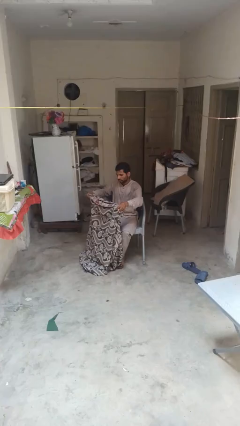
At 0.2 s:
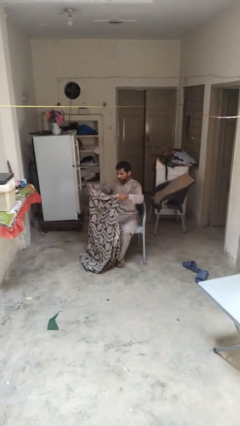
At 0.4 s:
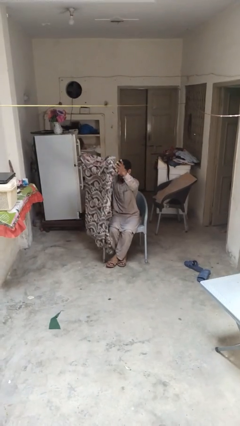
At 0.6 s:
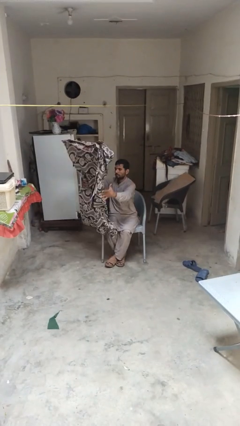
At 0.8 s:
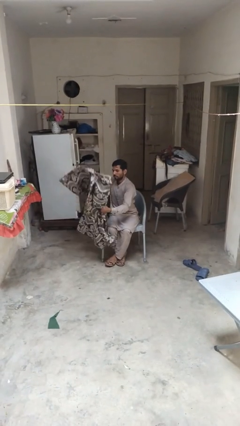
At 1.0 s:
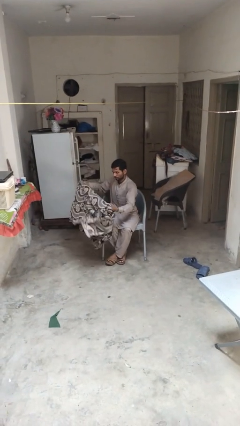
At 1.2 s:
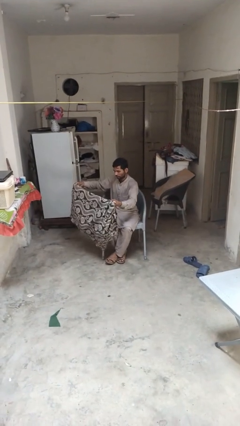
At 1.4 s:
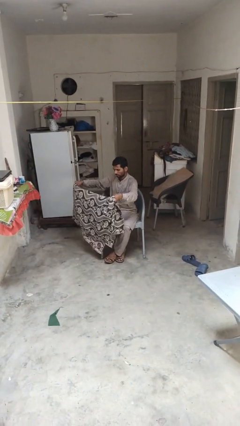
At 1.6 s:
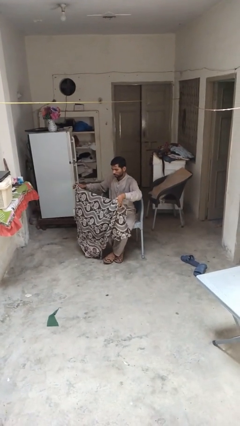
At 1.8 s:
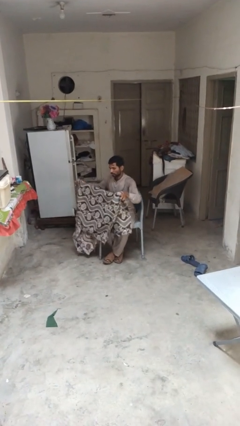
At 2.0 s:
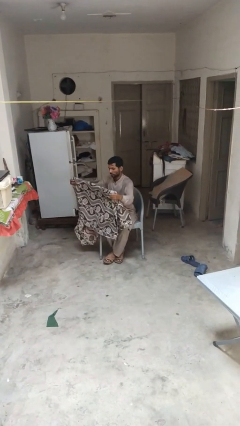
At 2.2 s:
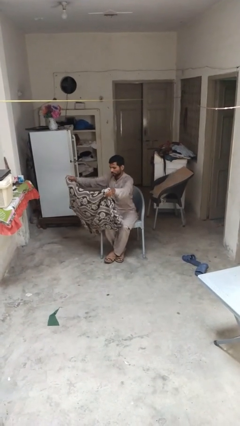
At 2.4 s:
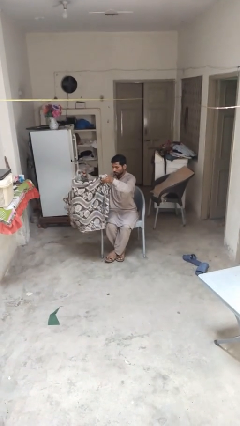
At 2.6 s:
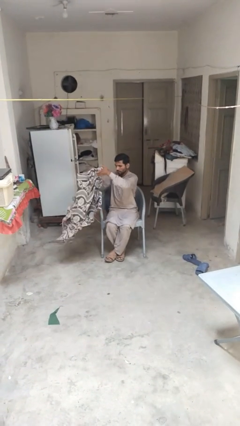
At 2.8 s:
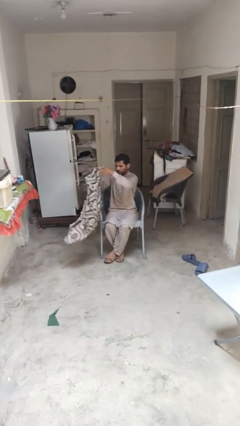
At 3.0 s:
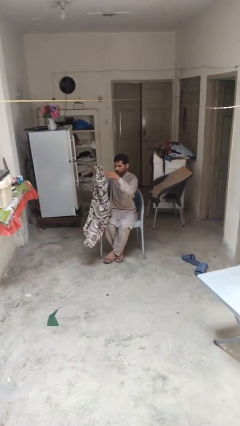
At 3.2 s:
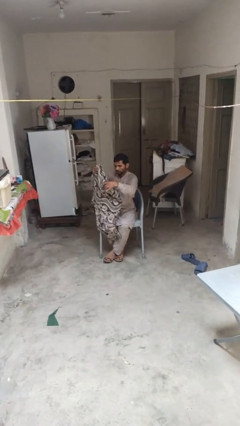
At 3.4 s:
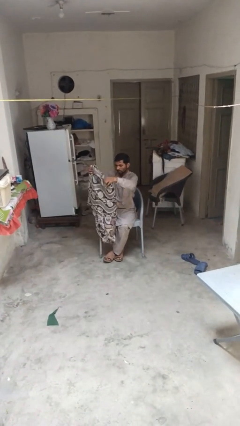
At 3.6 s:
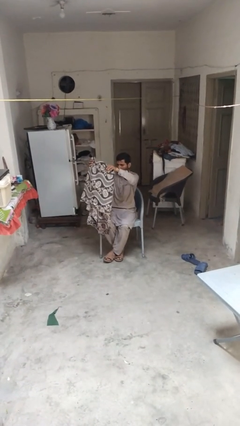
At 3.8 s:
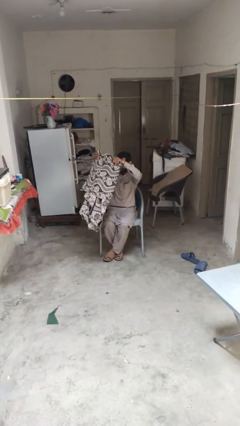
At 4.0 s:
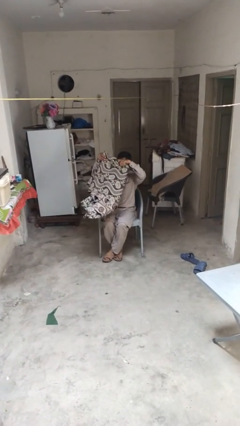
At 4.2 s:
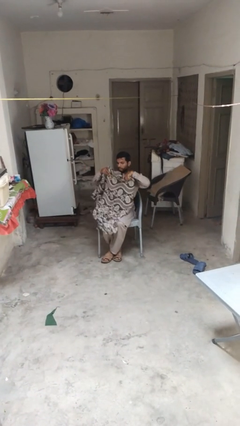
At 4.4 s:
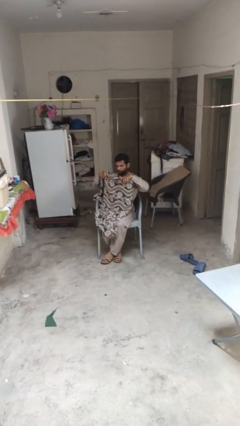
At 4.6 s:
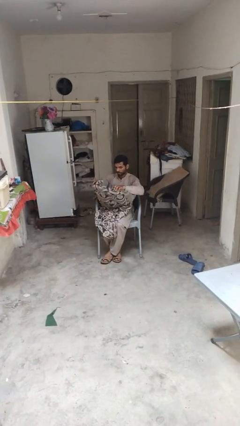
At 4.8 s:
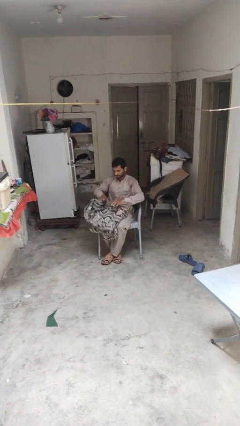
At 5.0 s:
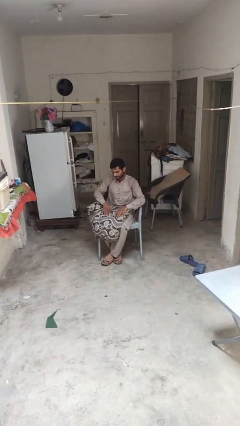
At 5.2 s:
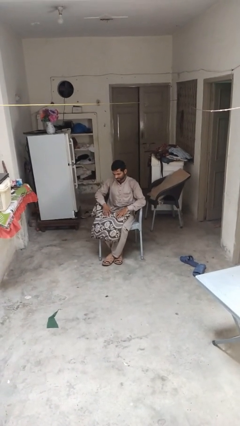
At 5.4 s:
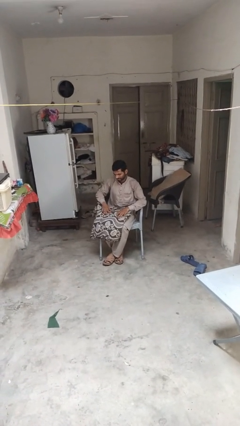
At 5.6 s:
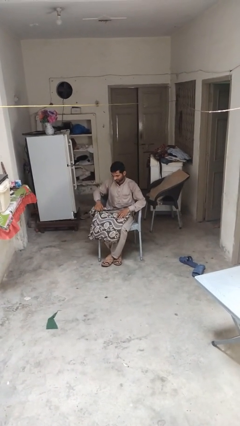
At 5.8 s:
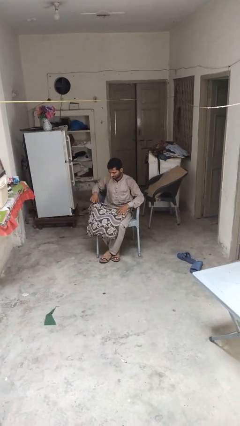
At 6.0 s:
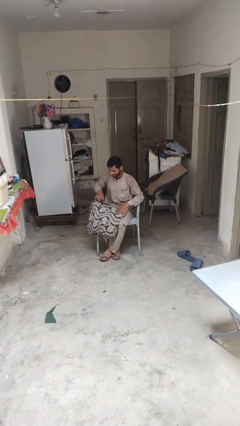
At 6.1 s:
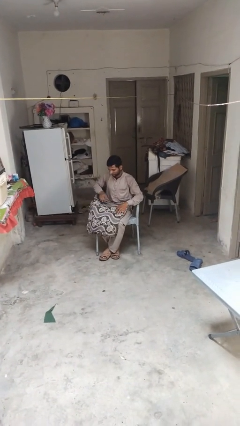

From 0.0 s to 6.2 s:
person folds blanket

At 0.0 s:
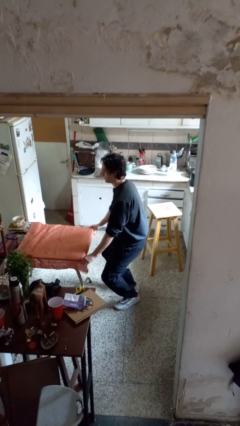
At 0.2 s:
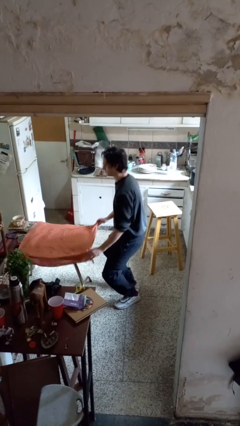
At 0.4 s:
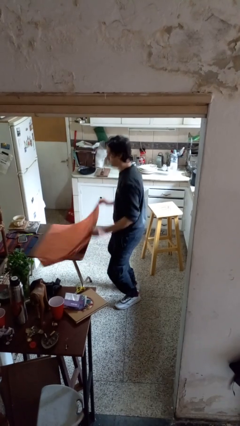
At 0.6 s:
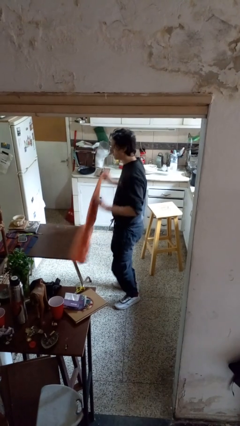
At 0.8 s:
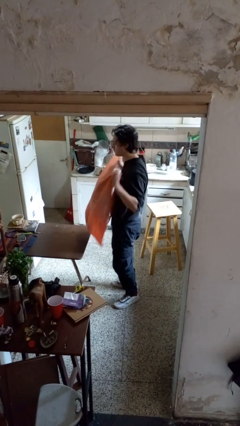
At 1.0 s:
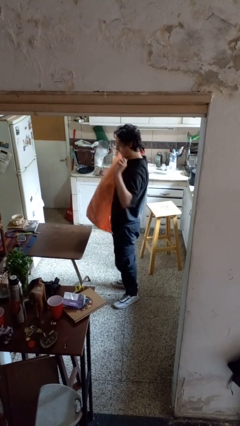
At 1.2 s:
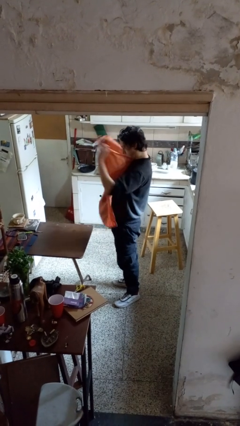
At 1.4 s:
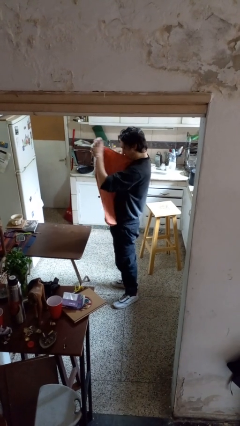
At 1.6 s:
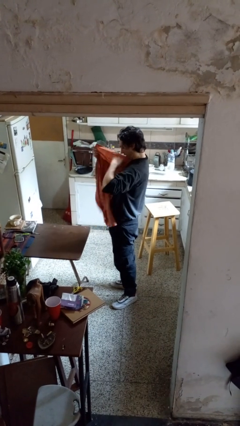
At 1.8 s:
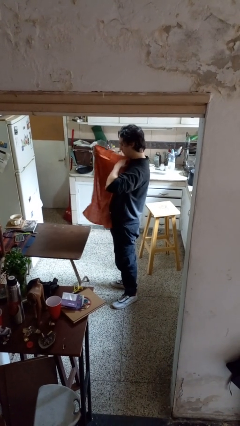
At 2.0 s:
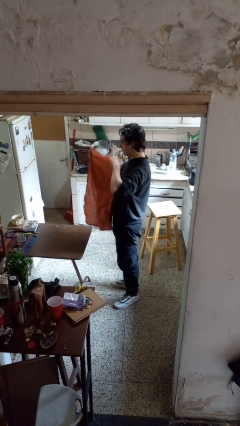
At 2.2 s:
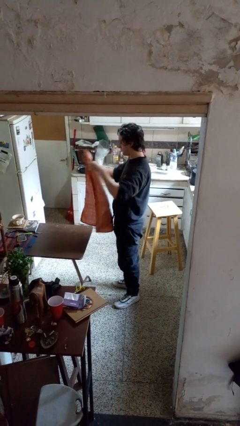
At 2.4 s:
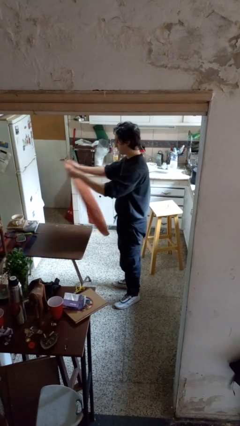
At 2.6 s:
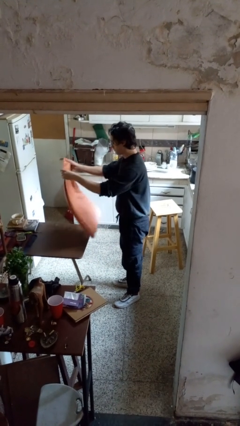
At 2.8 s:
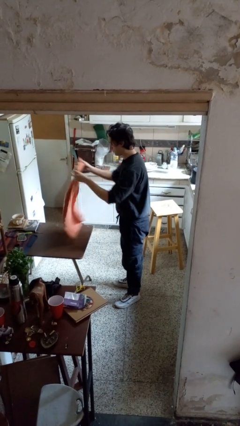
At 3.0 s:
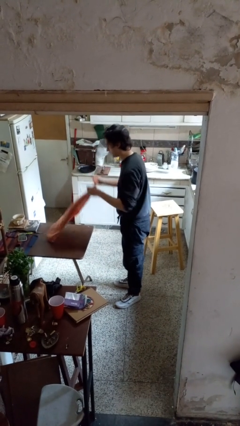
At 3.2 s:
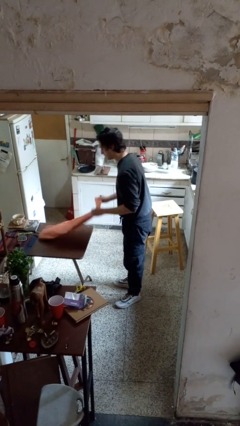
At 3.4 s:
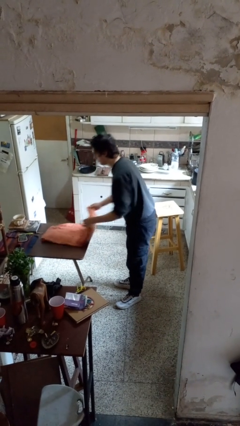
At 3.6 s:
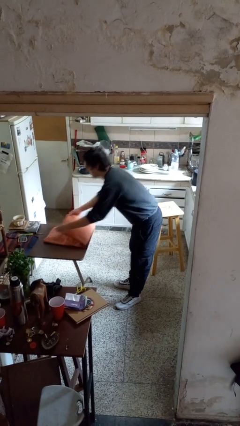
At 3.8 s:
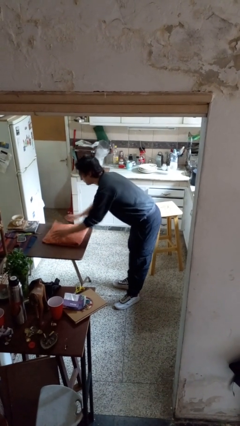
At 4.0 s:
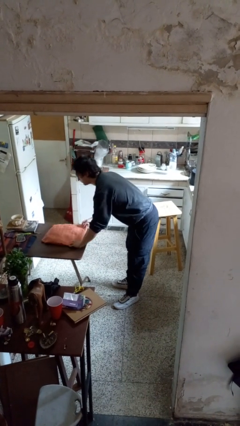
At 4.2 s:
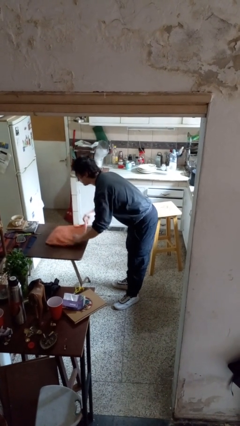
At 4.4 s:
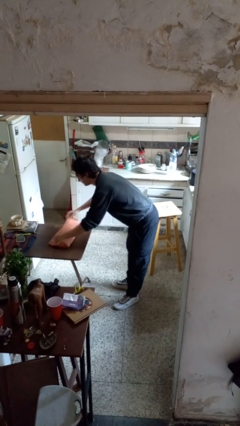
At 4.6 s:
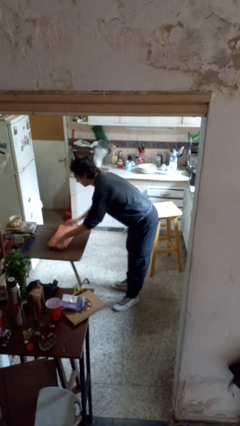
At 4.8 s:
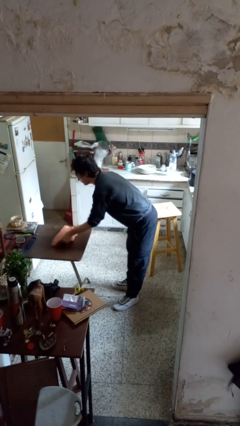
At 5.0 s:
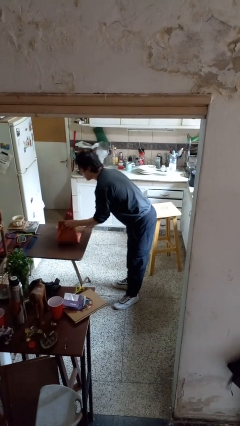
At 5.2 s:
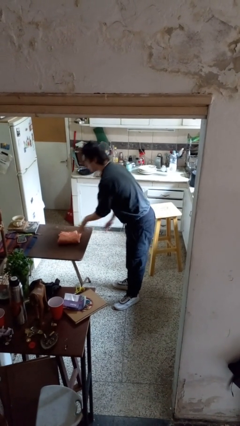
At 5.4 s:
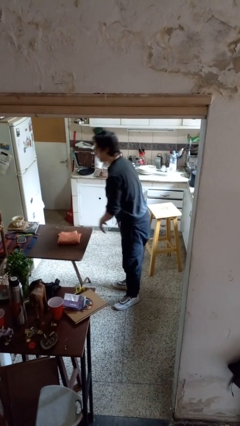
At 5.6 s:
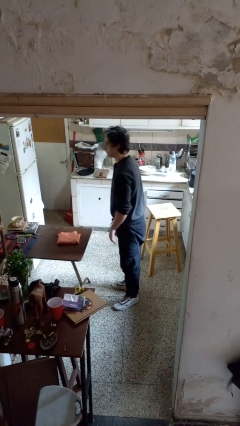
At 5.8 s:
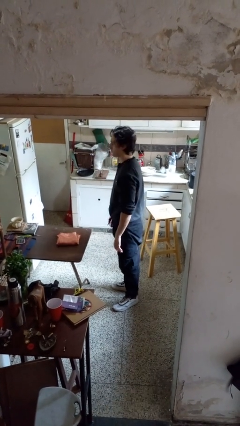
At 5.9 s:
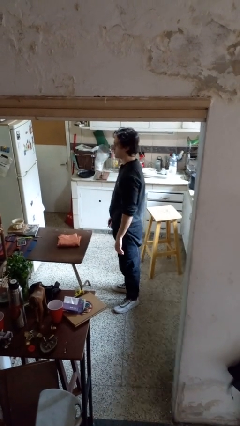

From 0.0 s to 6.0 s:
person folds tablecloth

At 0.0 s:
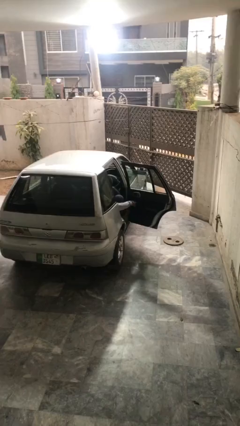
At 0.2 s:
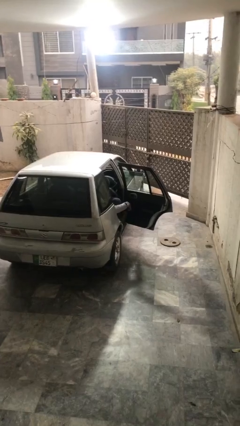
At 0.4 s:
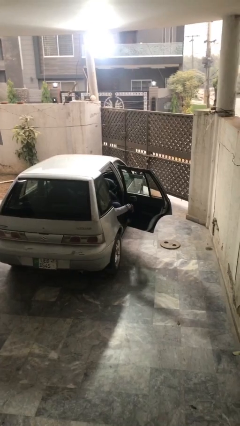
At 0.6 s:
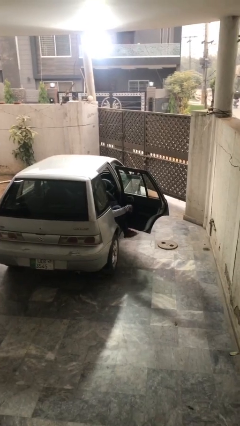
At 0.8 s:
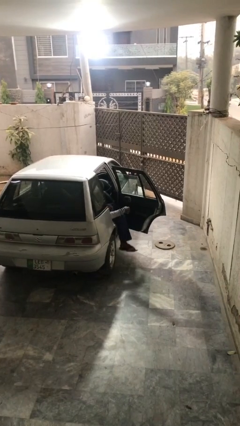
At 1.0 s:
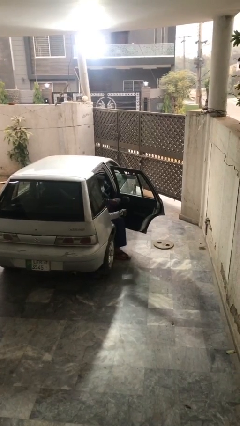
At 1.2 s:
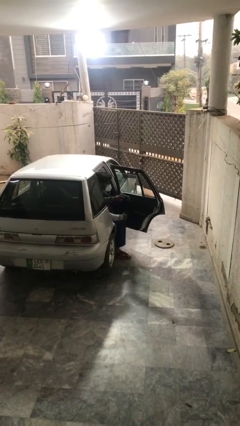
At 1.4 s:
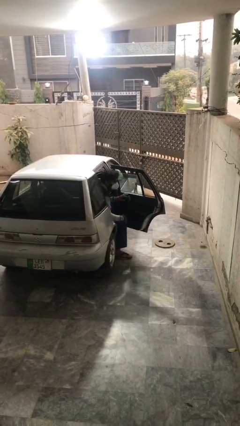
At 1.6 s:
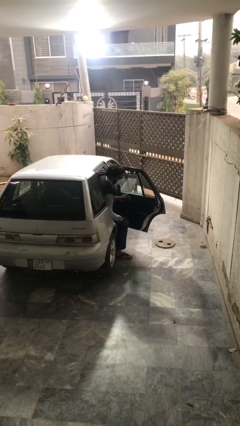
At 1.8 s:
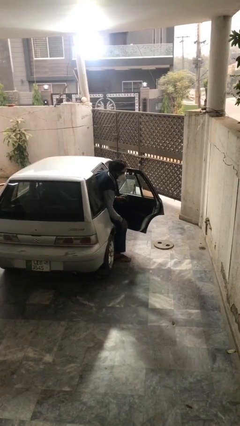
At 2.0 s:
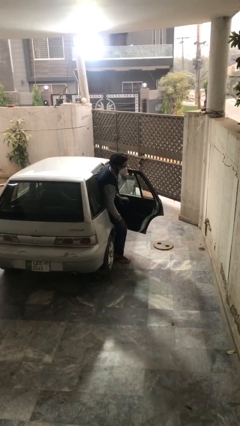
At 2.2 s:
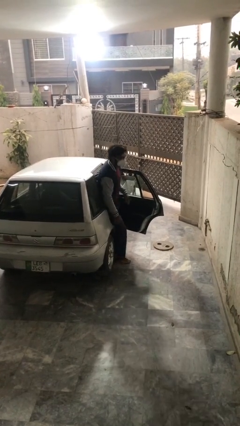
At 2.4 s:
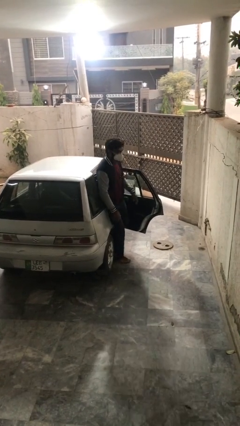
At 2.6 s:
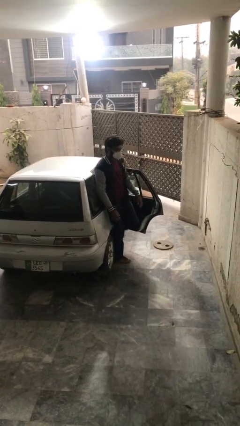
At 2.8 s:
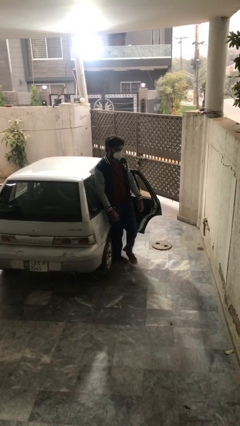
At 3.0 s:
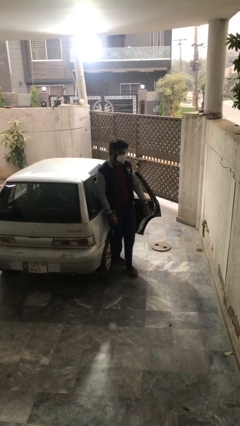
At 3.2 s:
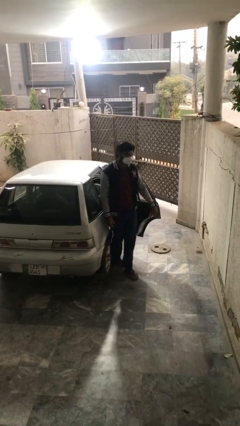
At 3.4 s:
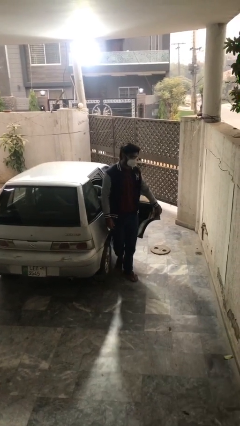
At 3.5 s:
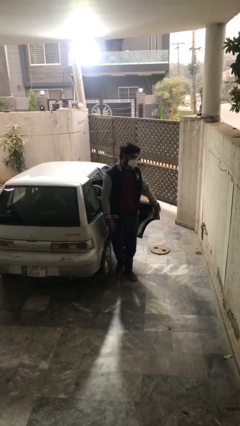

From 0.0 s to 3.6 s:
person exits car

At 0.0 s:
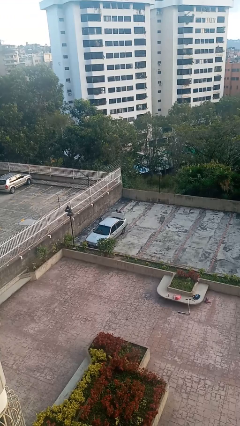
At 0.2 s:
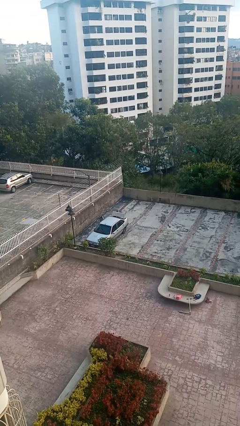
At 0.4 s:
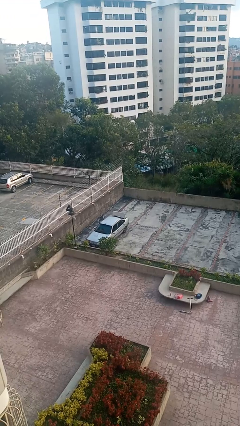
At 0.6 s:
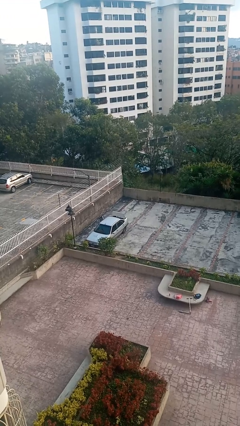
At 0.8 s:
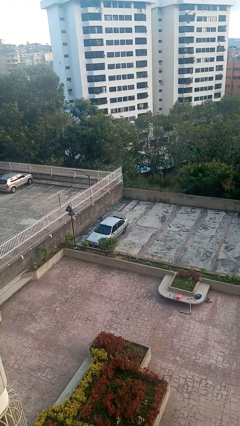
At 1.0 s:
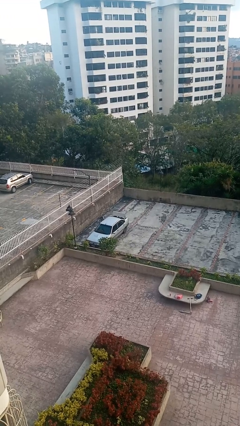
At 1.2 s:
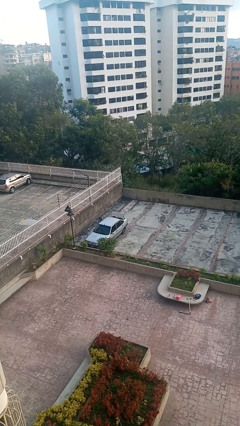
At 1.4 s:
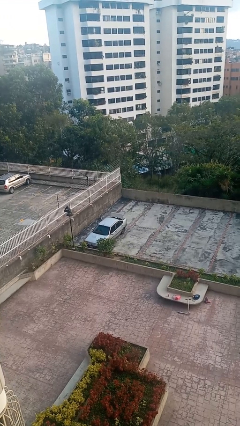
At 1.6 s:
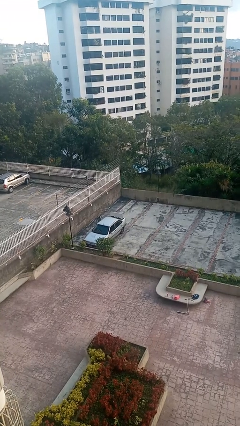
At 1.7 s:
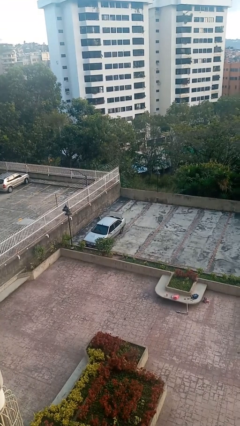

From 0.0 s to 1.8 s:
person loads car

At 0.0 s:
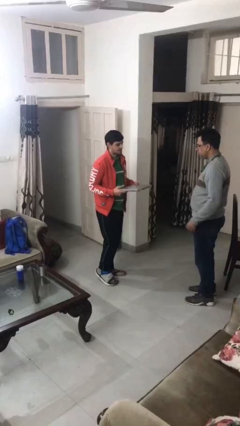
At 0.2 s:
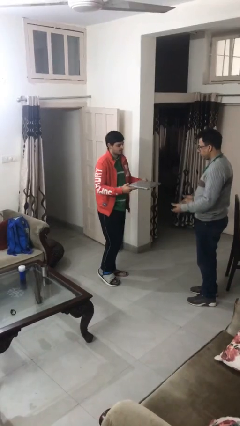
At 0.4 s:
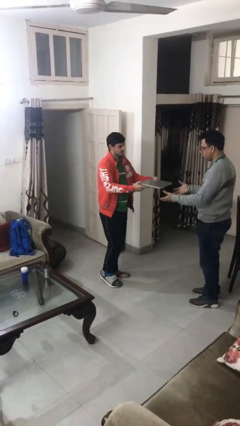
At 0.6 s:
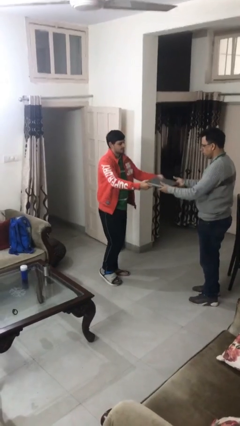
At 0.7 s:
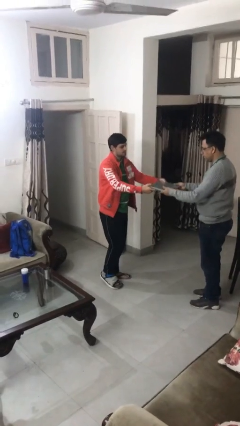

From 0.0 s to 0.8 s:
person transfers object to person
